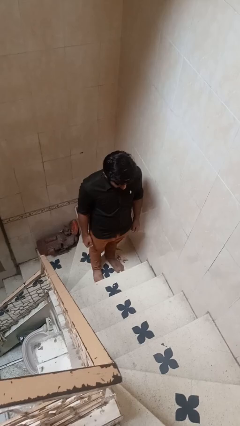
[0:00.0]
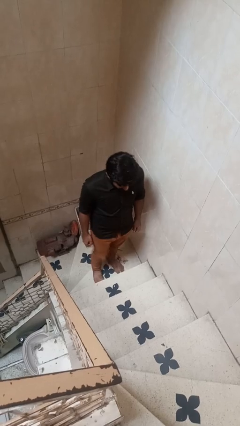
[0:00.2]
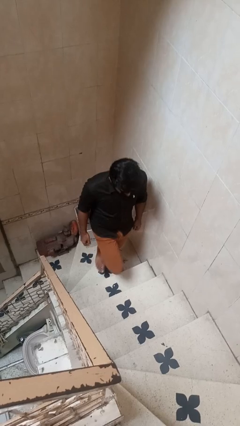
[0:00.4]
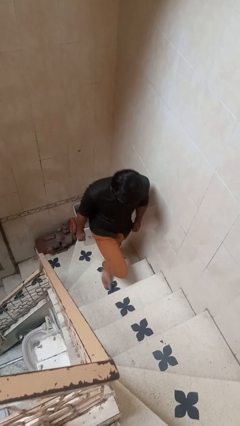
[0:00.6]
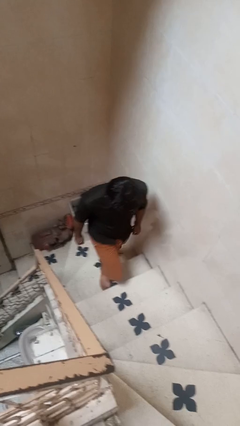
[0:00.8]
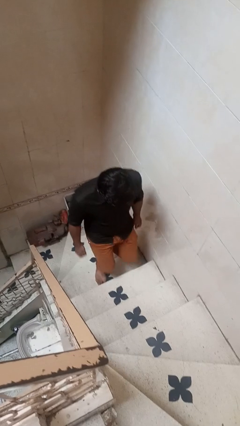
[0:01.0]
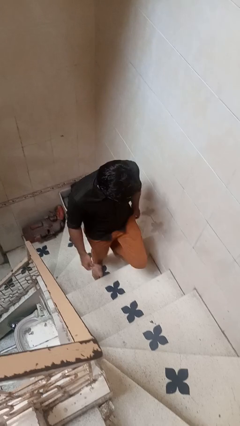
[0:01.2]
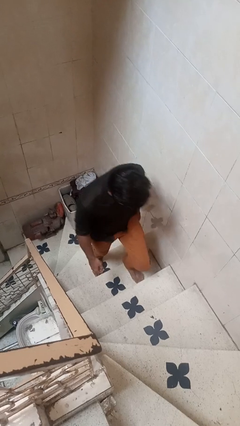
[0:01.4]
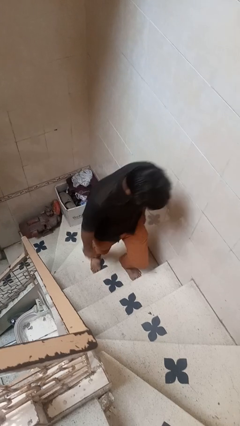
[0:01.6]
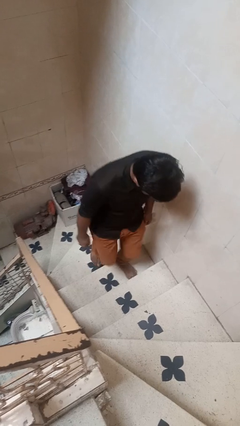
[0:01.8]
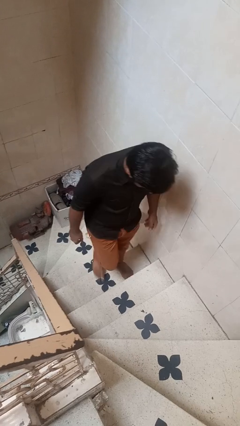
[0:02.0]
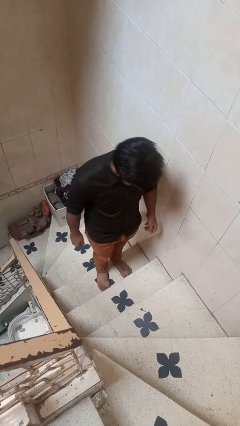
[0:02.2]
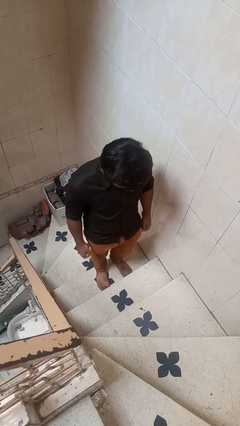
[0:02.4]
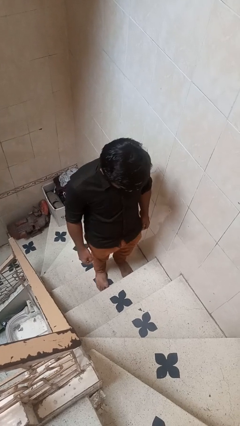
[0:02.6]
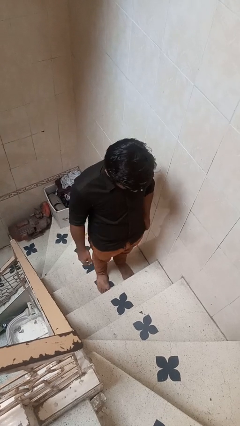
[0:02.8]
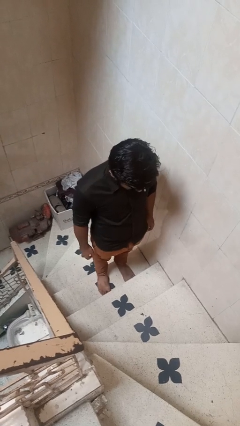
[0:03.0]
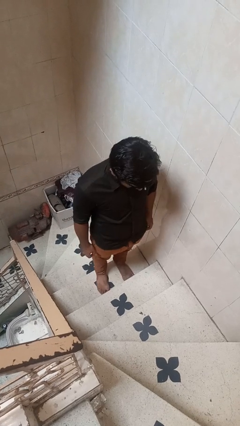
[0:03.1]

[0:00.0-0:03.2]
person climbs up stairs

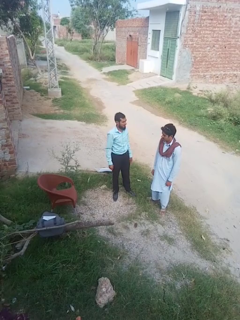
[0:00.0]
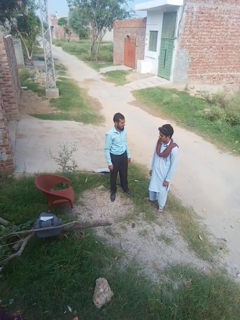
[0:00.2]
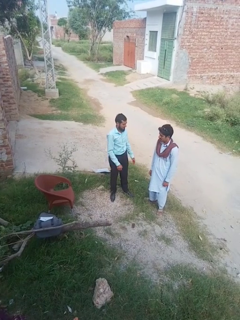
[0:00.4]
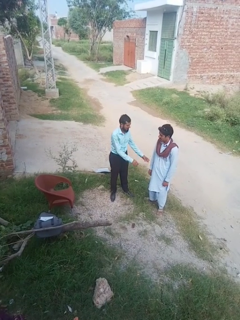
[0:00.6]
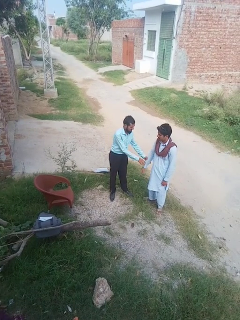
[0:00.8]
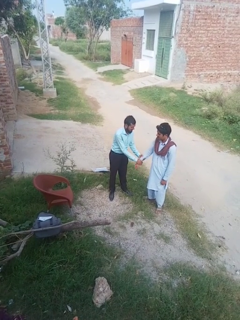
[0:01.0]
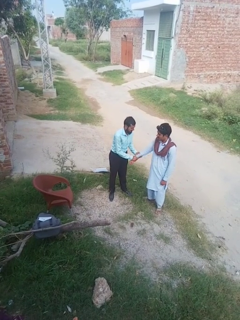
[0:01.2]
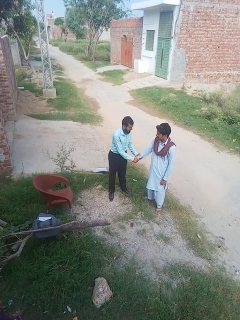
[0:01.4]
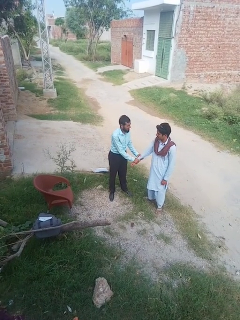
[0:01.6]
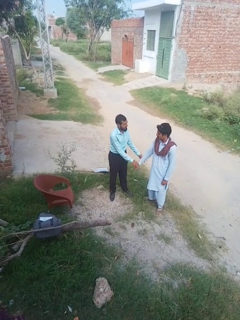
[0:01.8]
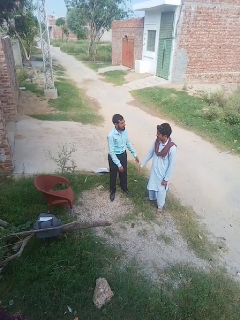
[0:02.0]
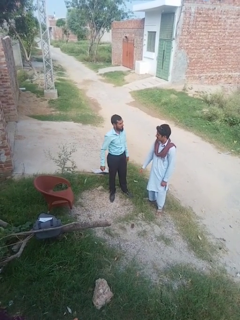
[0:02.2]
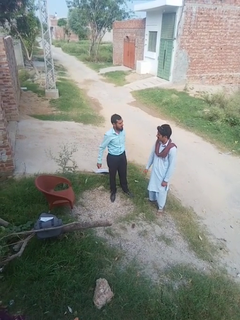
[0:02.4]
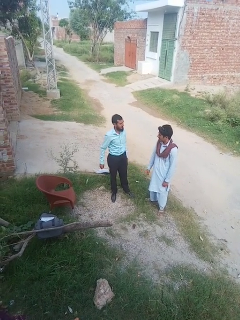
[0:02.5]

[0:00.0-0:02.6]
person grabs person by forearm

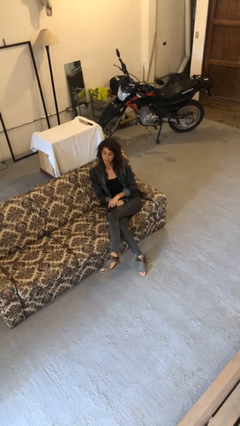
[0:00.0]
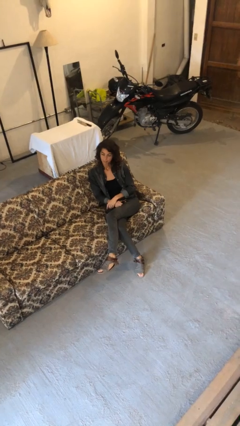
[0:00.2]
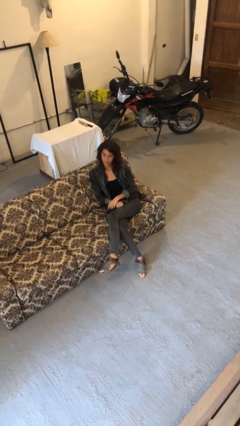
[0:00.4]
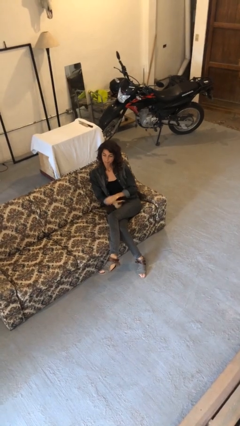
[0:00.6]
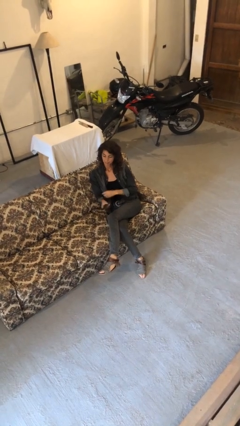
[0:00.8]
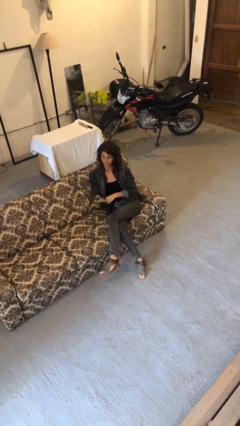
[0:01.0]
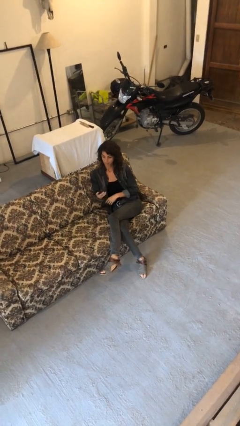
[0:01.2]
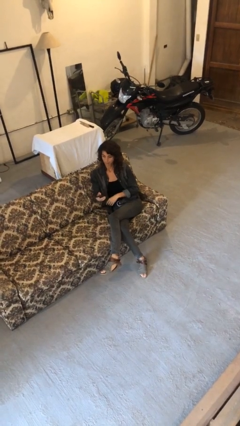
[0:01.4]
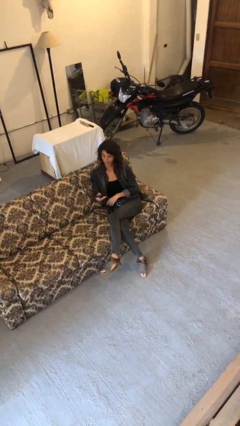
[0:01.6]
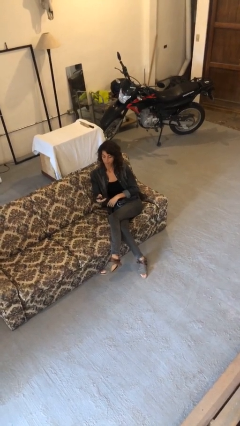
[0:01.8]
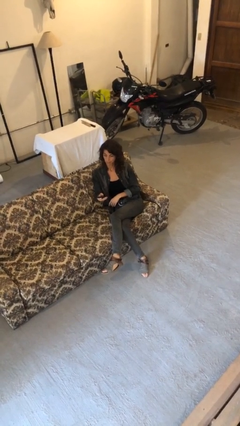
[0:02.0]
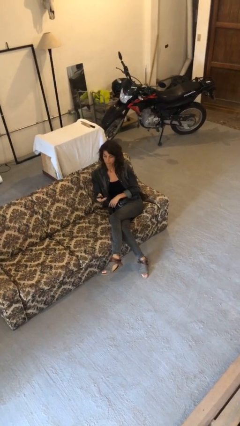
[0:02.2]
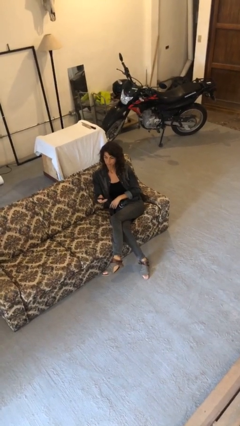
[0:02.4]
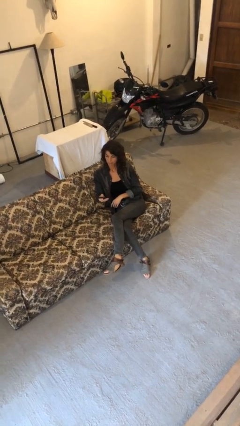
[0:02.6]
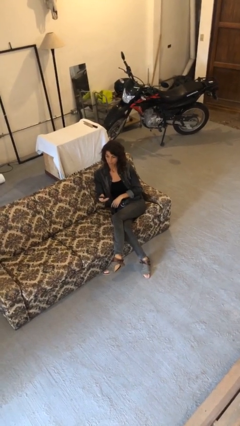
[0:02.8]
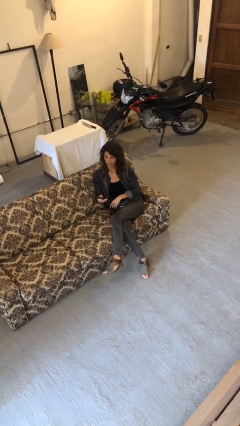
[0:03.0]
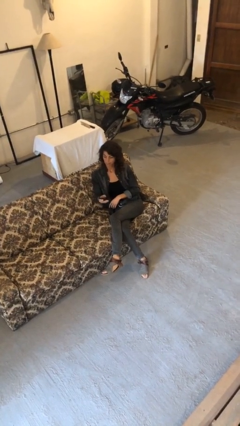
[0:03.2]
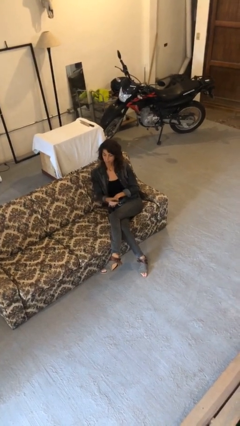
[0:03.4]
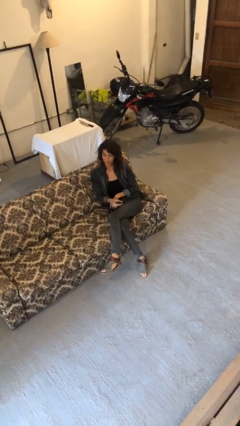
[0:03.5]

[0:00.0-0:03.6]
person uses television remote

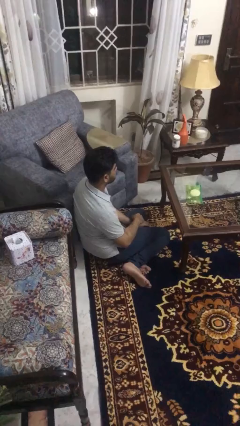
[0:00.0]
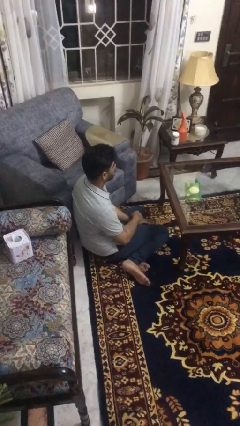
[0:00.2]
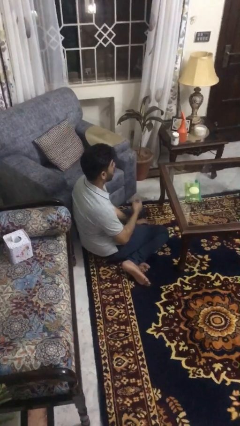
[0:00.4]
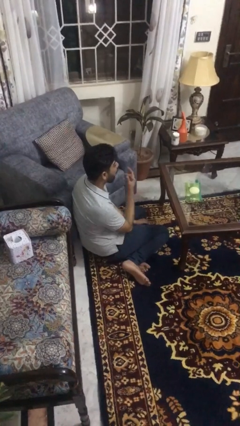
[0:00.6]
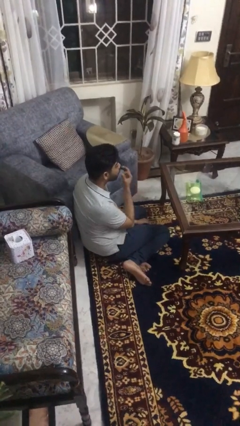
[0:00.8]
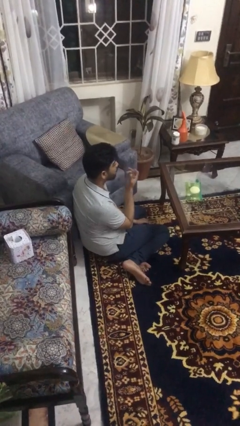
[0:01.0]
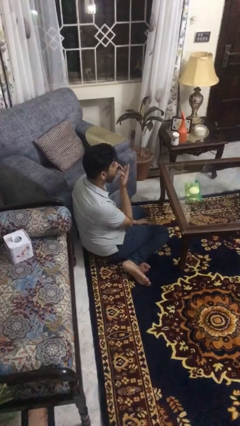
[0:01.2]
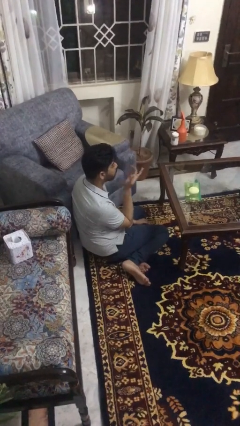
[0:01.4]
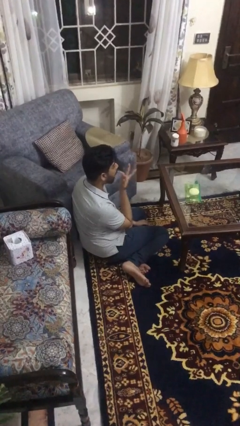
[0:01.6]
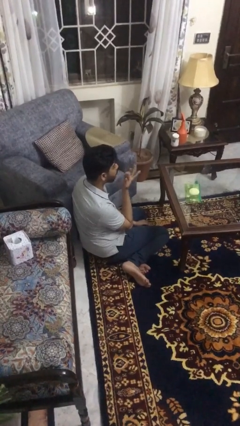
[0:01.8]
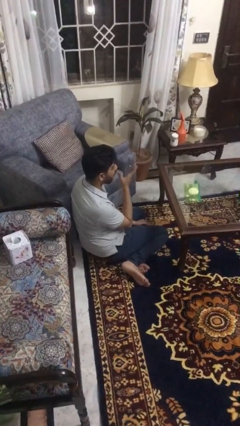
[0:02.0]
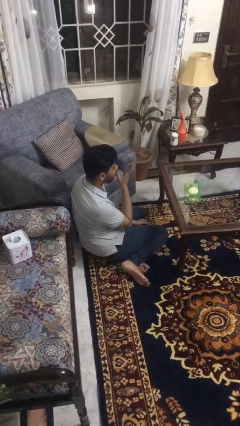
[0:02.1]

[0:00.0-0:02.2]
person licks fingers

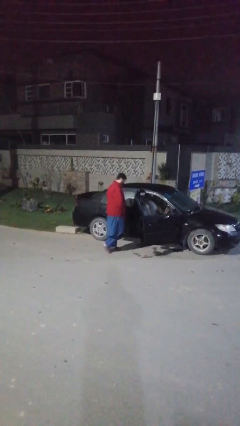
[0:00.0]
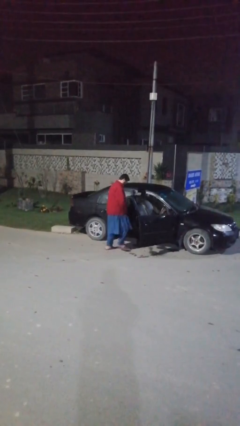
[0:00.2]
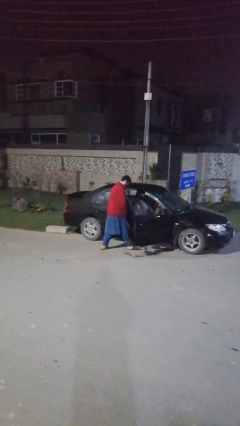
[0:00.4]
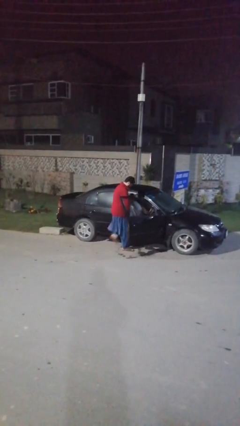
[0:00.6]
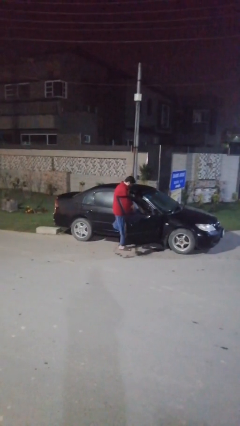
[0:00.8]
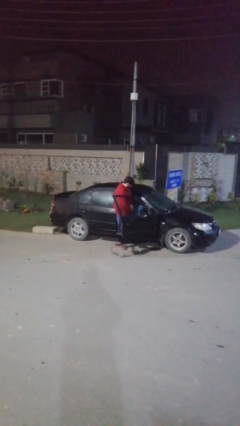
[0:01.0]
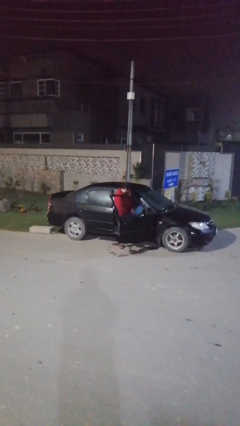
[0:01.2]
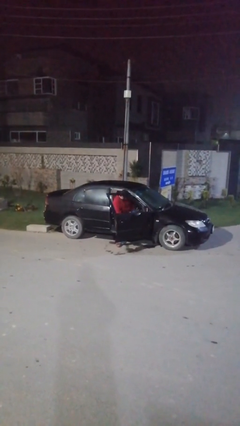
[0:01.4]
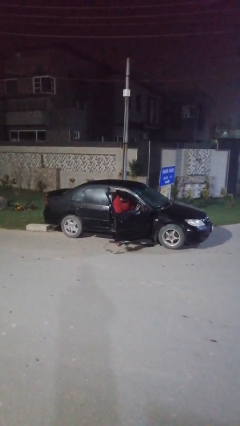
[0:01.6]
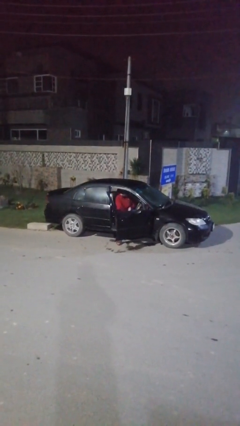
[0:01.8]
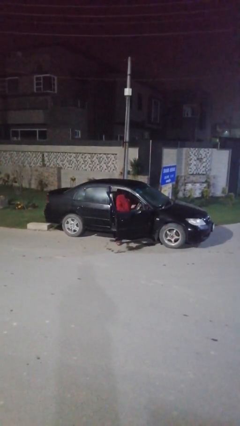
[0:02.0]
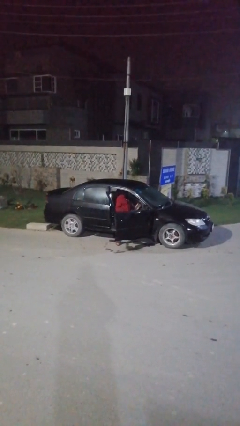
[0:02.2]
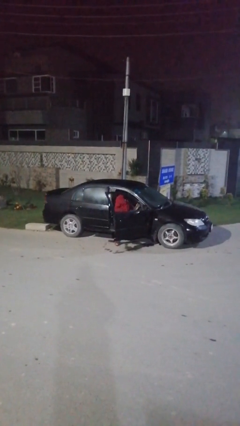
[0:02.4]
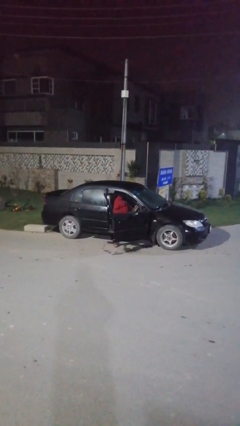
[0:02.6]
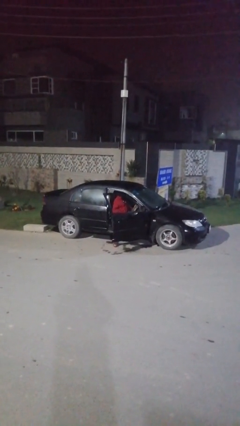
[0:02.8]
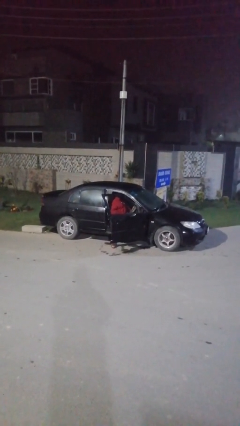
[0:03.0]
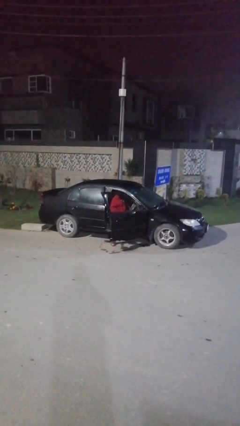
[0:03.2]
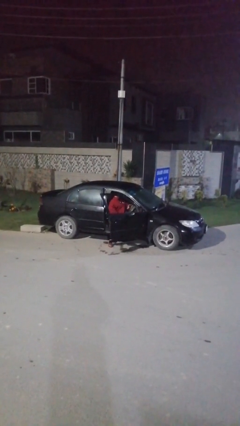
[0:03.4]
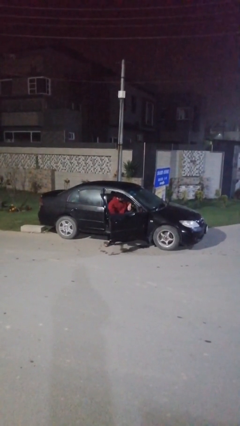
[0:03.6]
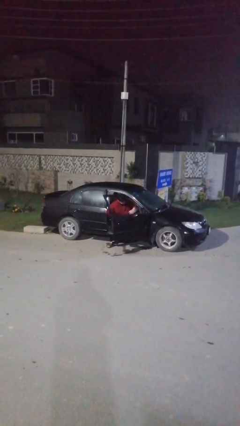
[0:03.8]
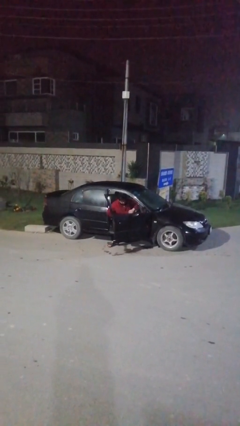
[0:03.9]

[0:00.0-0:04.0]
person enters car

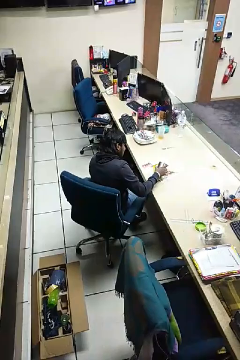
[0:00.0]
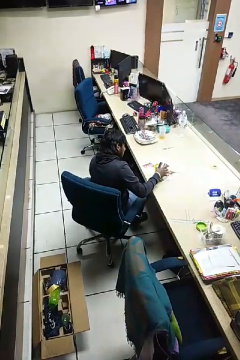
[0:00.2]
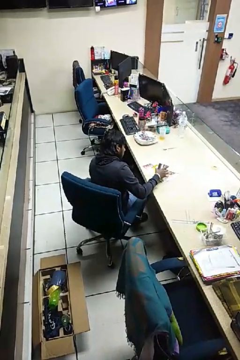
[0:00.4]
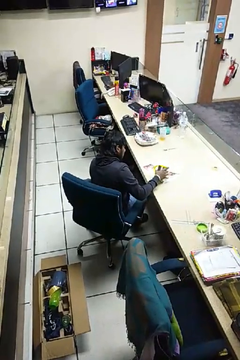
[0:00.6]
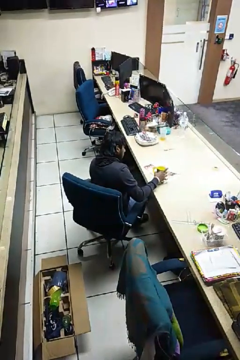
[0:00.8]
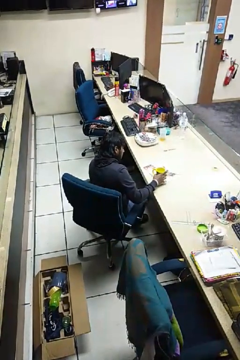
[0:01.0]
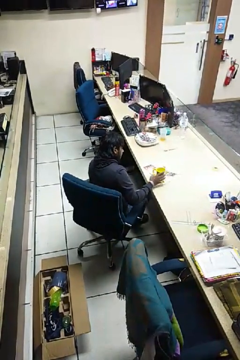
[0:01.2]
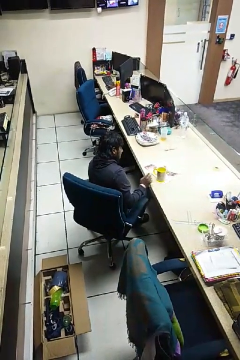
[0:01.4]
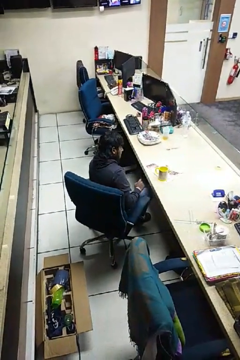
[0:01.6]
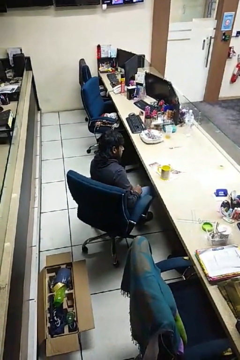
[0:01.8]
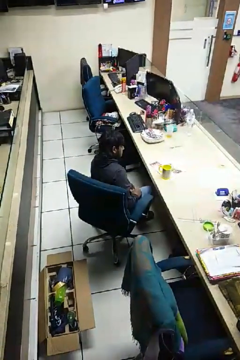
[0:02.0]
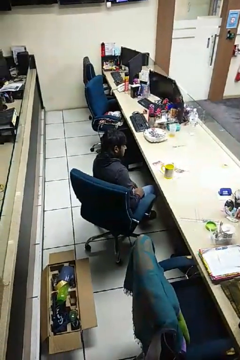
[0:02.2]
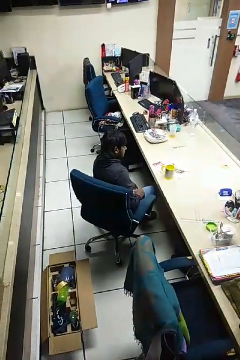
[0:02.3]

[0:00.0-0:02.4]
person sets upright glass
